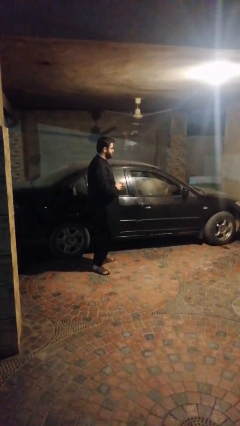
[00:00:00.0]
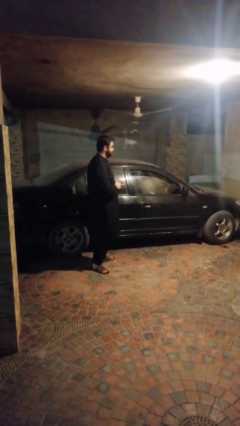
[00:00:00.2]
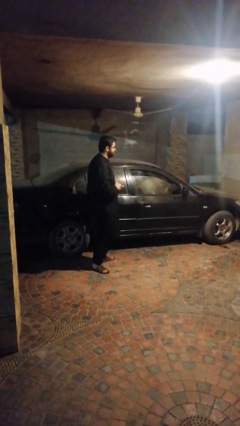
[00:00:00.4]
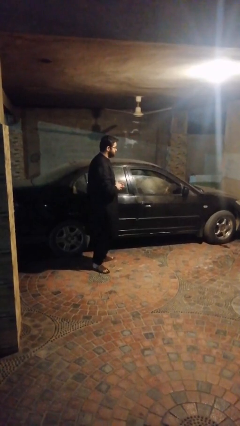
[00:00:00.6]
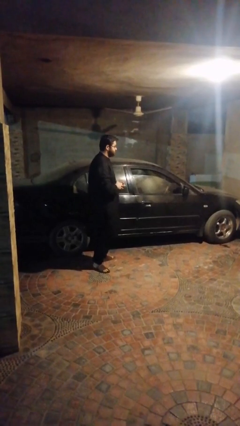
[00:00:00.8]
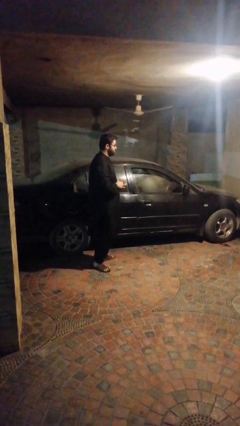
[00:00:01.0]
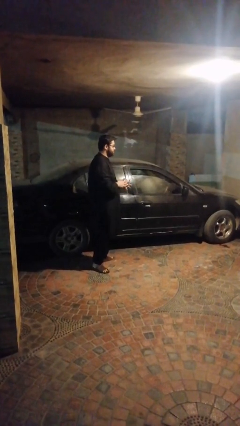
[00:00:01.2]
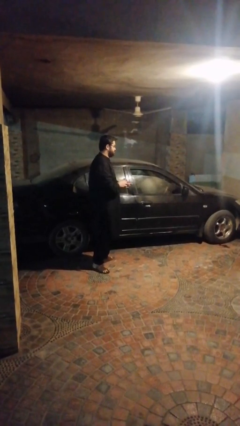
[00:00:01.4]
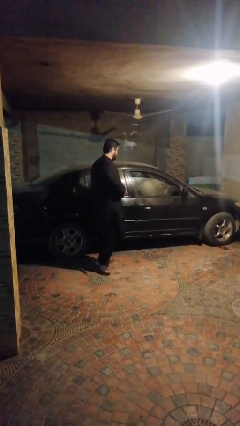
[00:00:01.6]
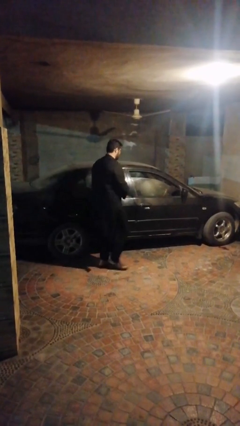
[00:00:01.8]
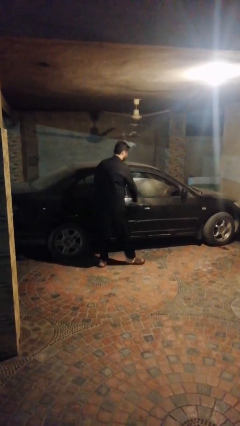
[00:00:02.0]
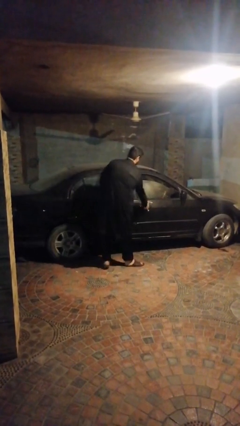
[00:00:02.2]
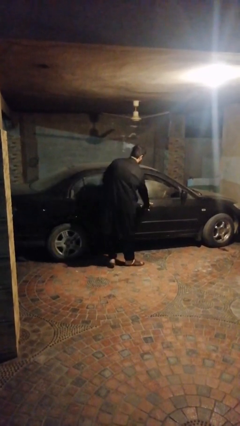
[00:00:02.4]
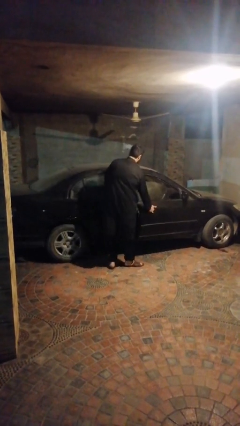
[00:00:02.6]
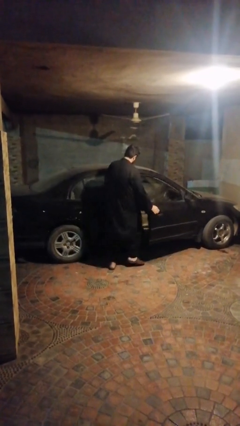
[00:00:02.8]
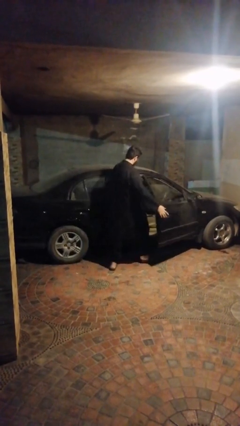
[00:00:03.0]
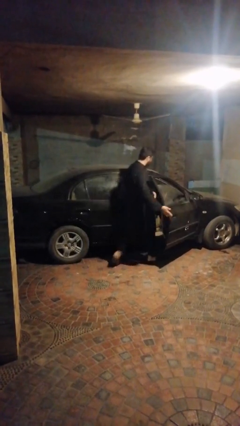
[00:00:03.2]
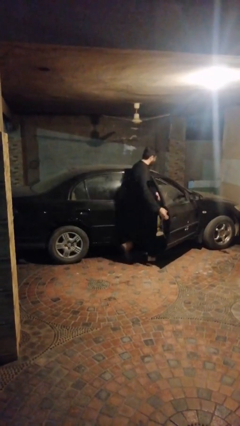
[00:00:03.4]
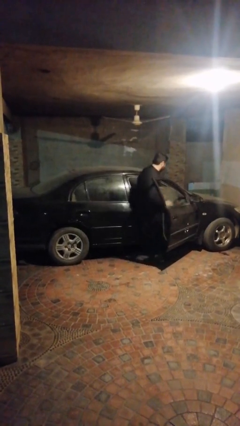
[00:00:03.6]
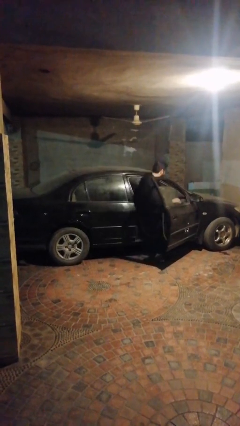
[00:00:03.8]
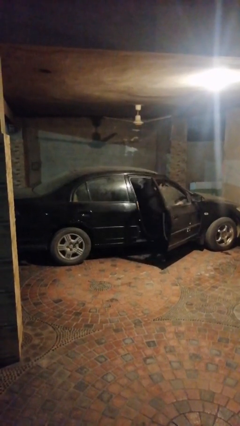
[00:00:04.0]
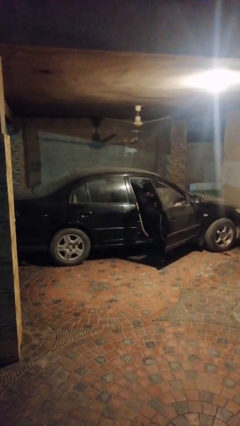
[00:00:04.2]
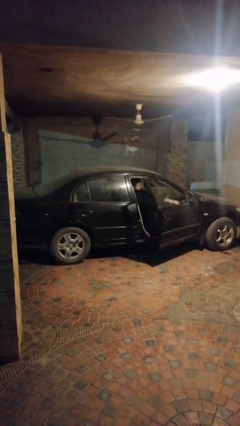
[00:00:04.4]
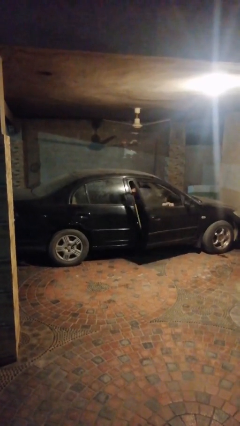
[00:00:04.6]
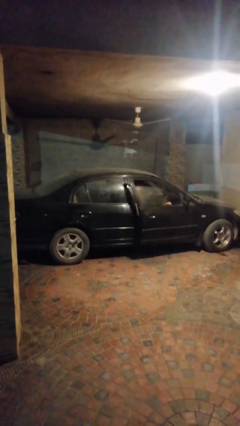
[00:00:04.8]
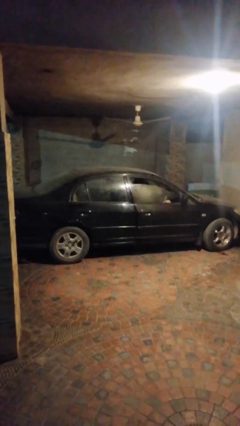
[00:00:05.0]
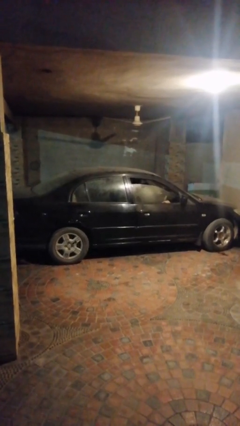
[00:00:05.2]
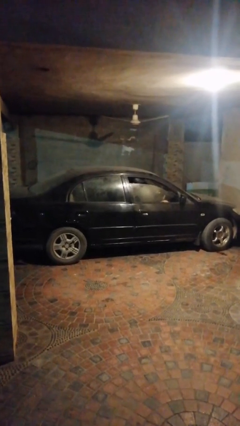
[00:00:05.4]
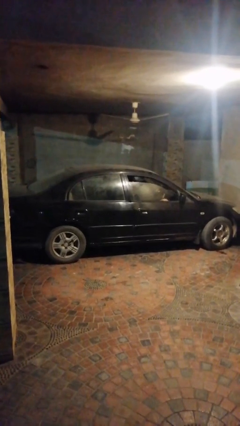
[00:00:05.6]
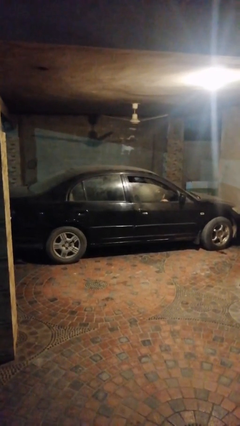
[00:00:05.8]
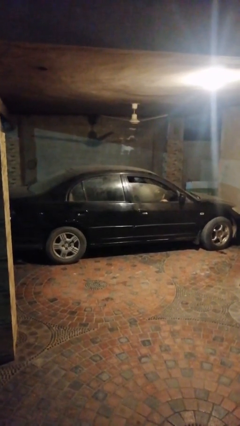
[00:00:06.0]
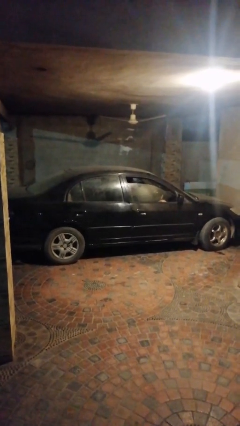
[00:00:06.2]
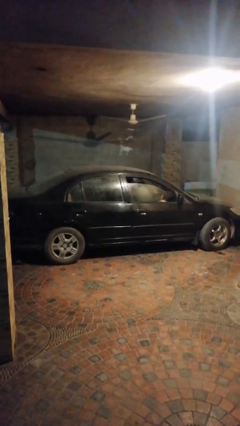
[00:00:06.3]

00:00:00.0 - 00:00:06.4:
car picks up person

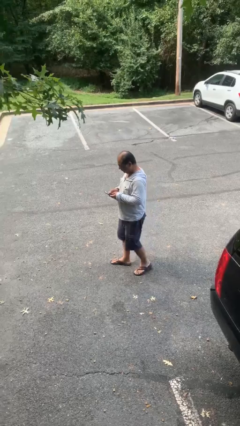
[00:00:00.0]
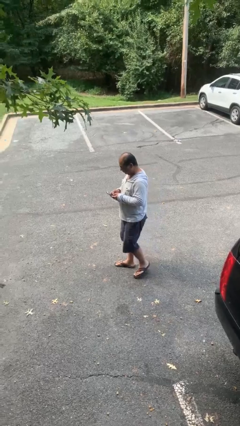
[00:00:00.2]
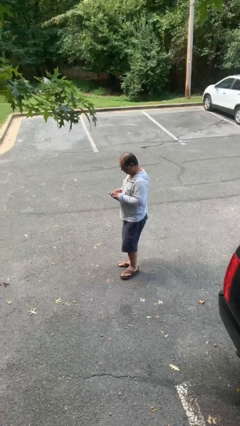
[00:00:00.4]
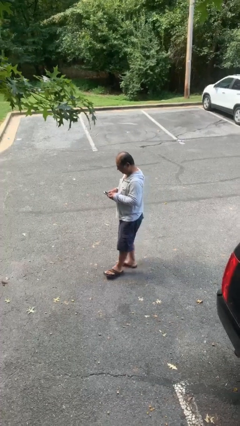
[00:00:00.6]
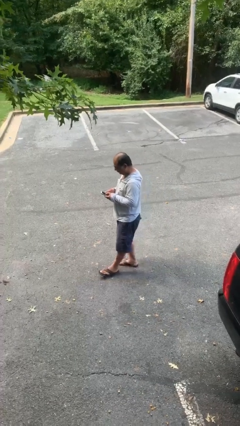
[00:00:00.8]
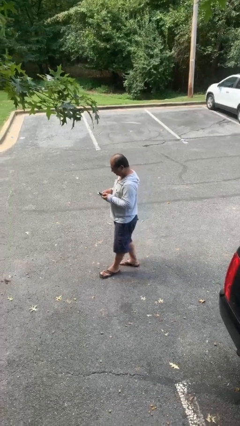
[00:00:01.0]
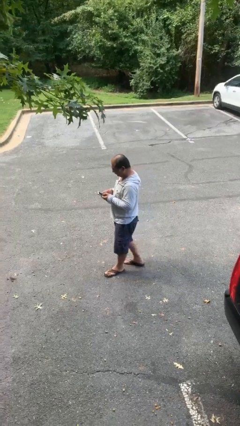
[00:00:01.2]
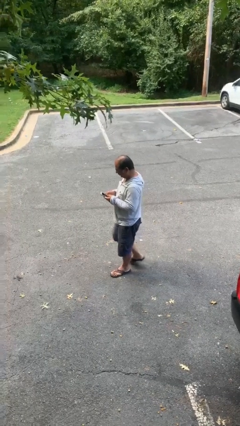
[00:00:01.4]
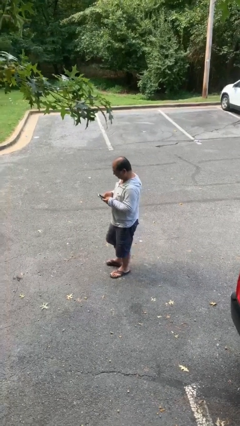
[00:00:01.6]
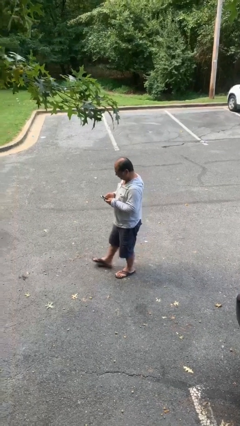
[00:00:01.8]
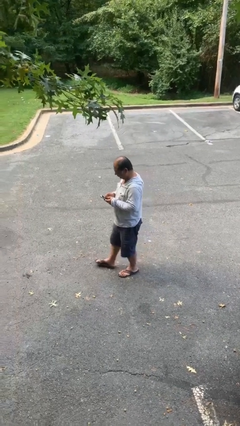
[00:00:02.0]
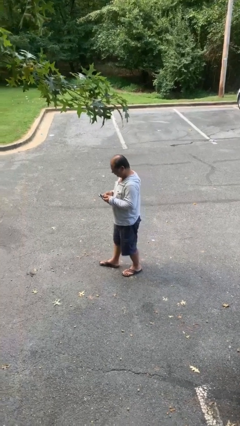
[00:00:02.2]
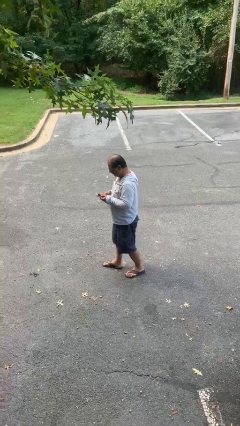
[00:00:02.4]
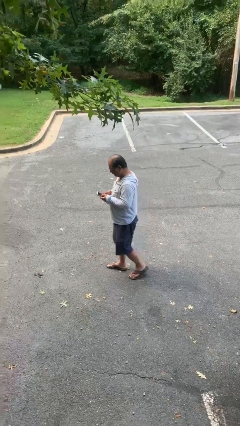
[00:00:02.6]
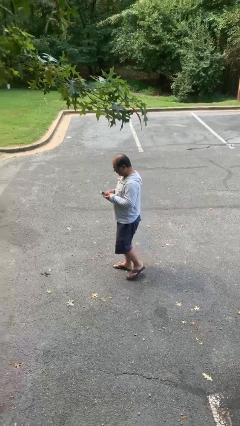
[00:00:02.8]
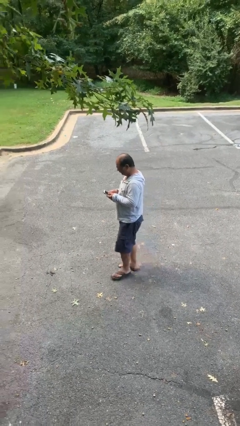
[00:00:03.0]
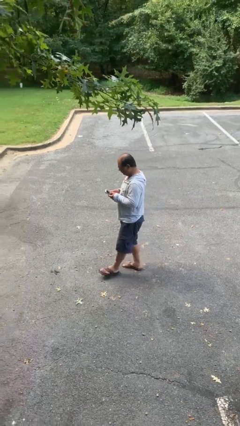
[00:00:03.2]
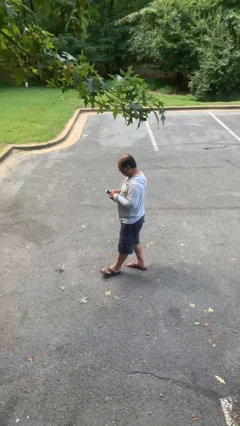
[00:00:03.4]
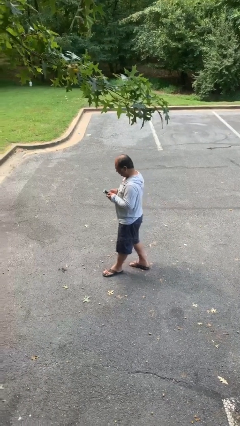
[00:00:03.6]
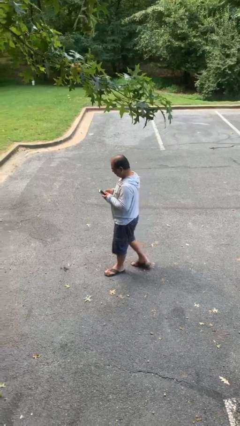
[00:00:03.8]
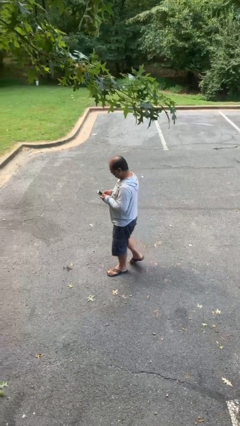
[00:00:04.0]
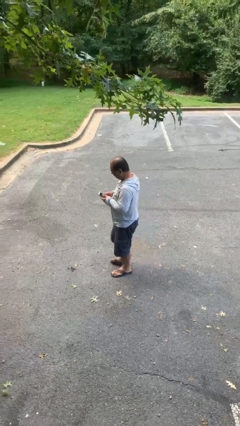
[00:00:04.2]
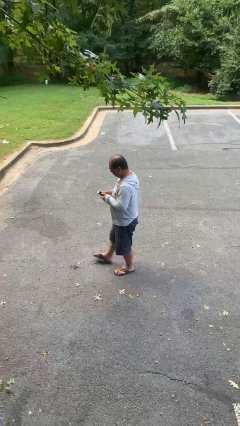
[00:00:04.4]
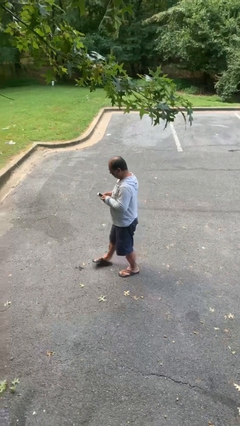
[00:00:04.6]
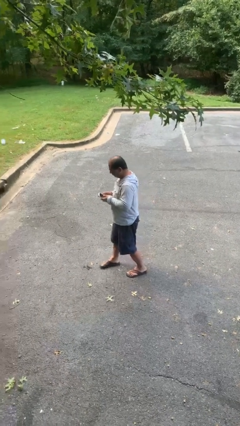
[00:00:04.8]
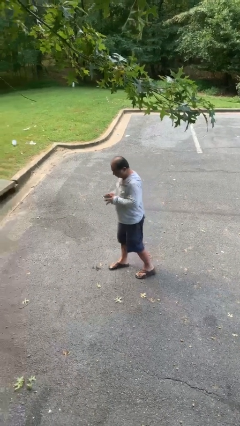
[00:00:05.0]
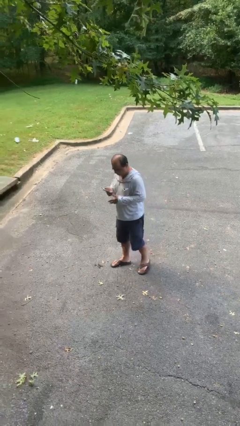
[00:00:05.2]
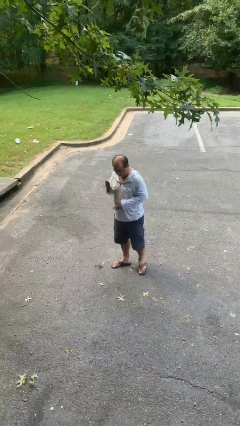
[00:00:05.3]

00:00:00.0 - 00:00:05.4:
person texts on phone

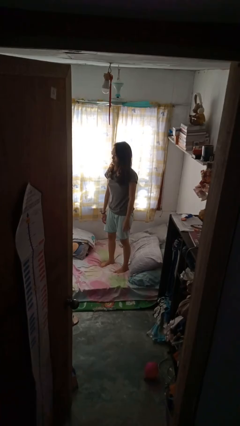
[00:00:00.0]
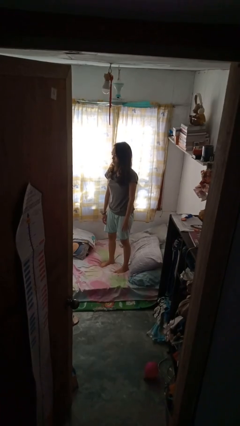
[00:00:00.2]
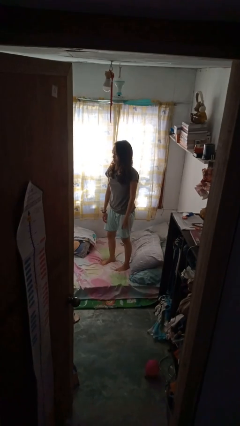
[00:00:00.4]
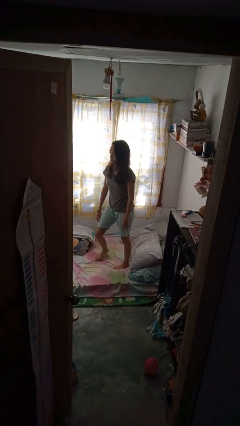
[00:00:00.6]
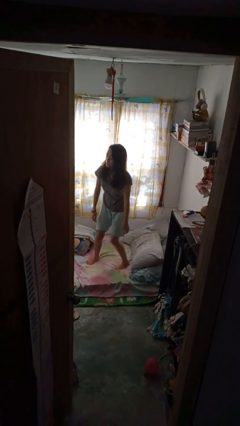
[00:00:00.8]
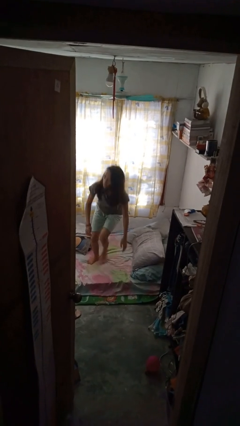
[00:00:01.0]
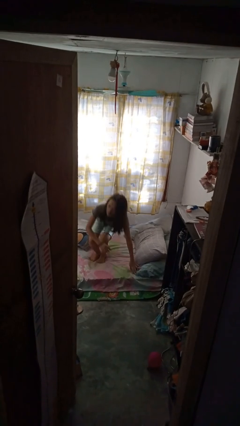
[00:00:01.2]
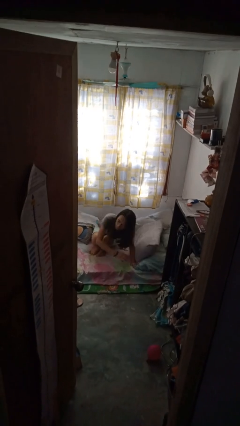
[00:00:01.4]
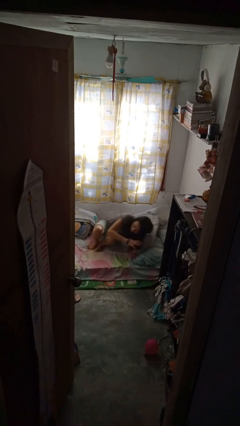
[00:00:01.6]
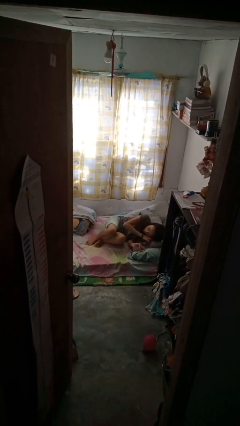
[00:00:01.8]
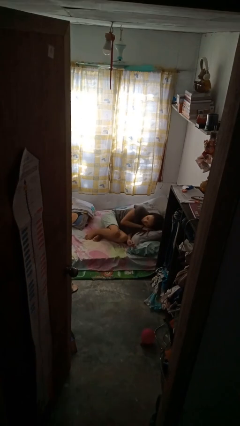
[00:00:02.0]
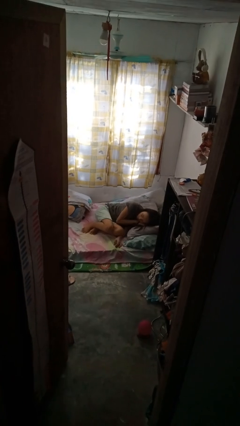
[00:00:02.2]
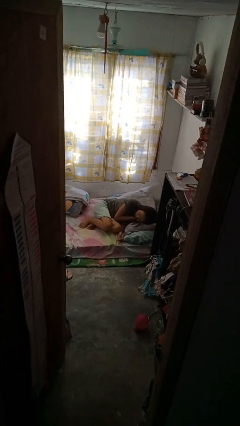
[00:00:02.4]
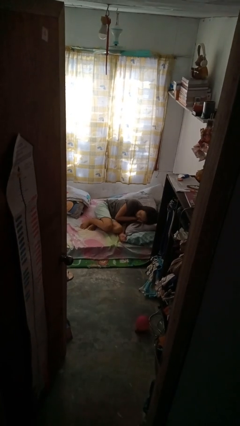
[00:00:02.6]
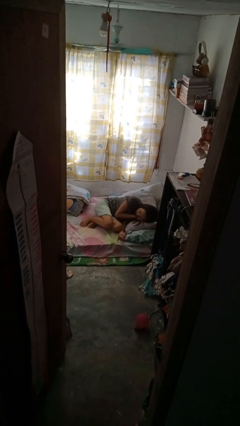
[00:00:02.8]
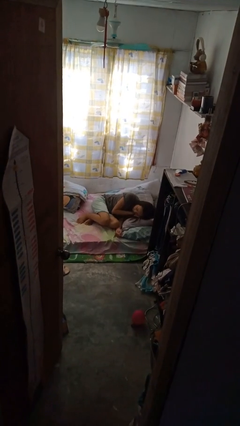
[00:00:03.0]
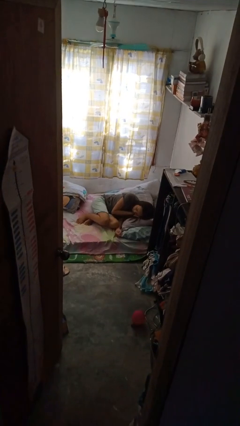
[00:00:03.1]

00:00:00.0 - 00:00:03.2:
person lies down on bed

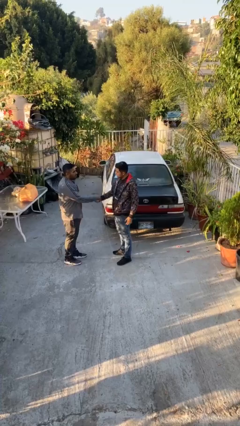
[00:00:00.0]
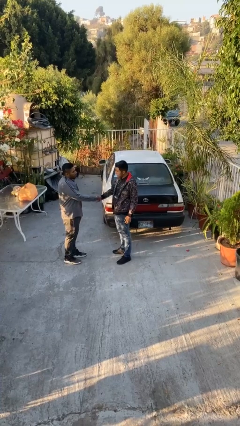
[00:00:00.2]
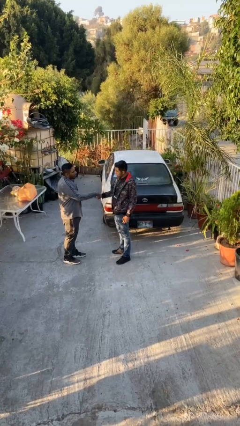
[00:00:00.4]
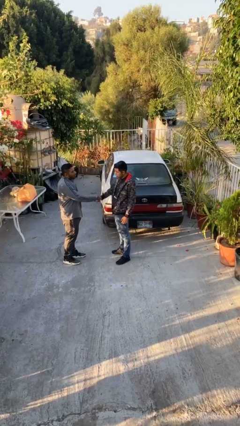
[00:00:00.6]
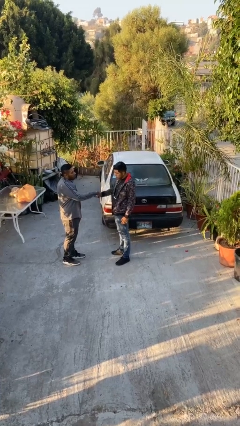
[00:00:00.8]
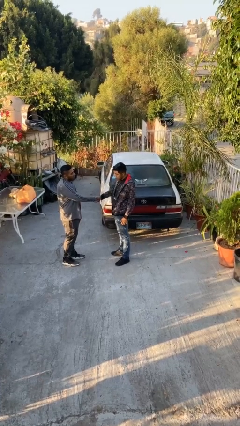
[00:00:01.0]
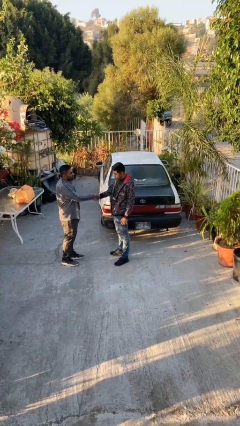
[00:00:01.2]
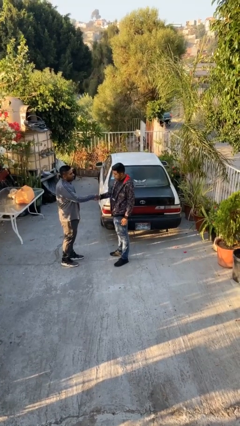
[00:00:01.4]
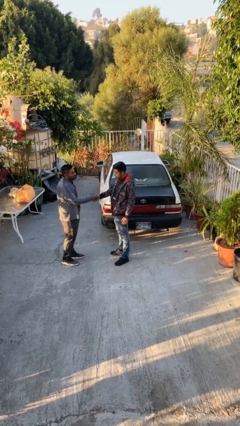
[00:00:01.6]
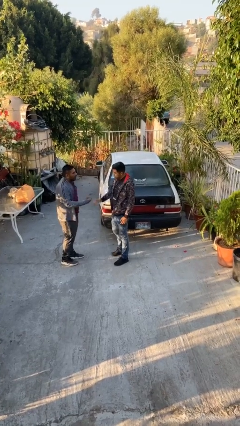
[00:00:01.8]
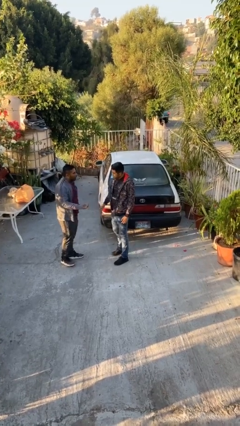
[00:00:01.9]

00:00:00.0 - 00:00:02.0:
person shakes hand

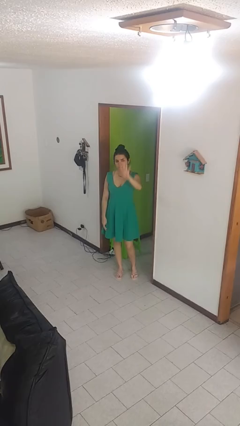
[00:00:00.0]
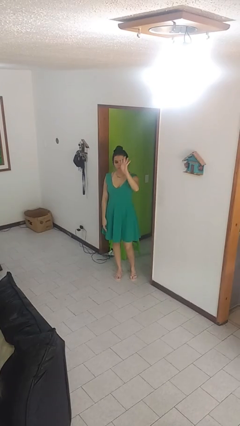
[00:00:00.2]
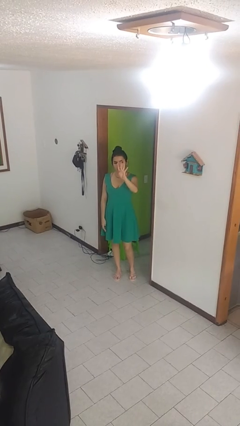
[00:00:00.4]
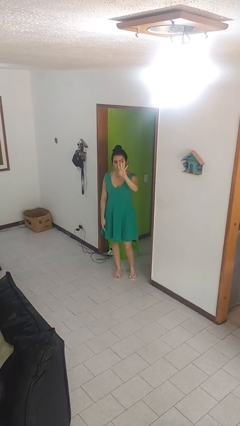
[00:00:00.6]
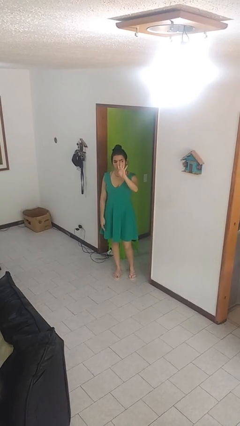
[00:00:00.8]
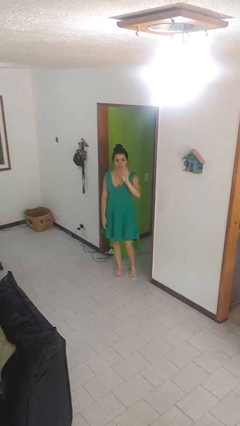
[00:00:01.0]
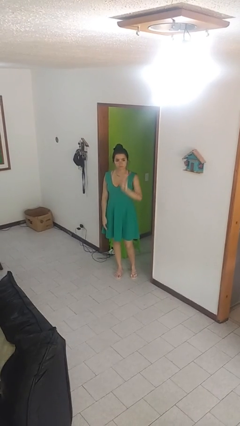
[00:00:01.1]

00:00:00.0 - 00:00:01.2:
person gestures number four
